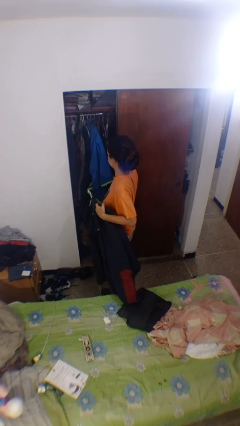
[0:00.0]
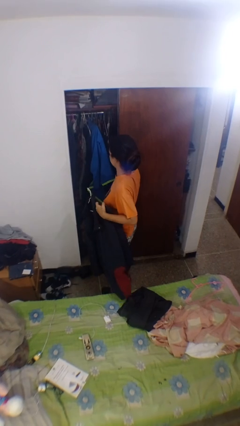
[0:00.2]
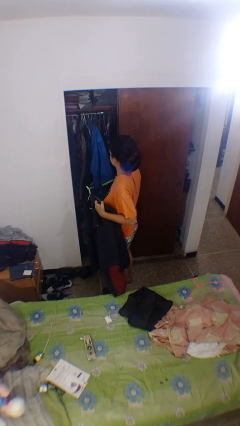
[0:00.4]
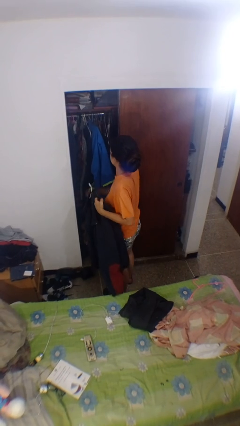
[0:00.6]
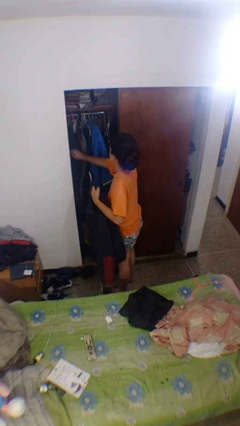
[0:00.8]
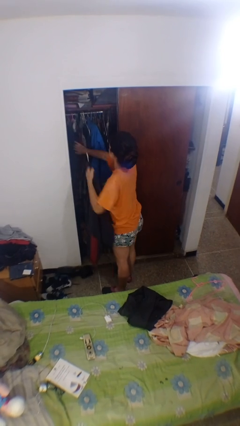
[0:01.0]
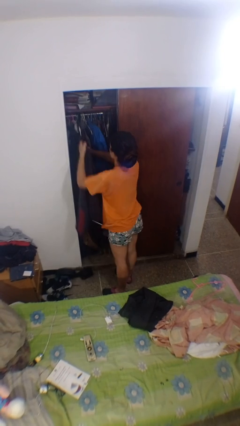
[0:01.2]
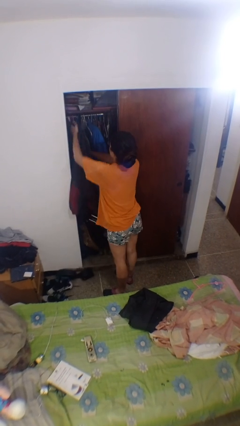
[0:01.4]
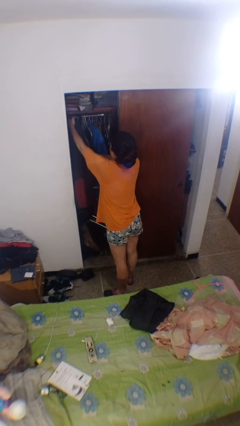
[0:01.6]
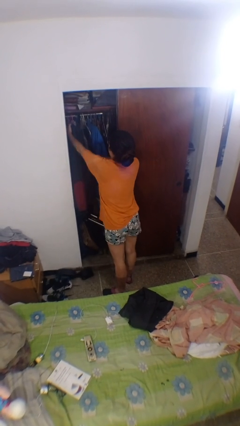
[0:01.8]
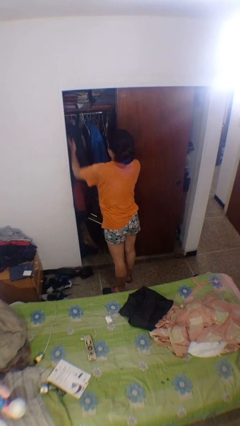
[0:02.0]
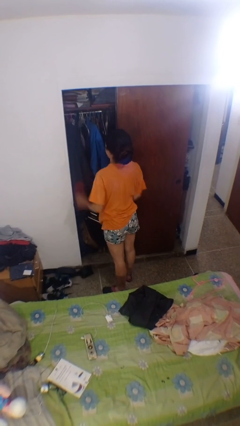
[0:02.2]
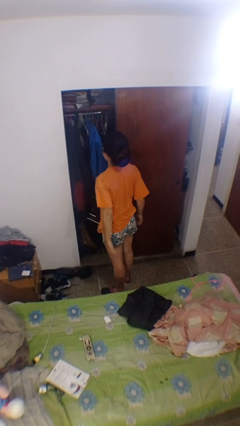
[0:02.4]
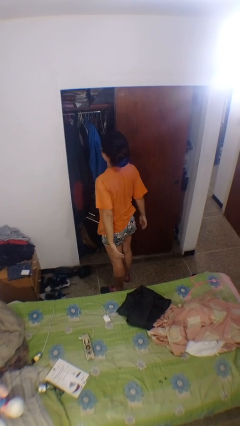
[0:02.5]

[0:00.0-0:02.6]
person puts clothes into closet

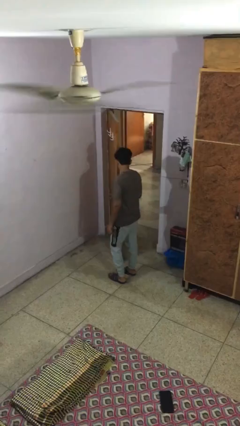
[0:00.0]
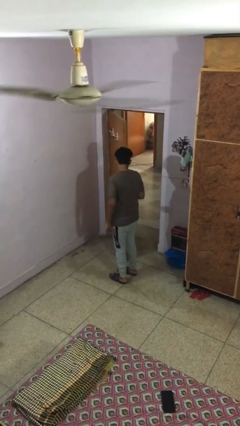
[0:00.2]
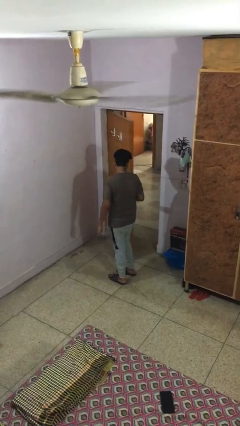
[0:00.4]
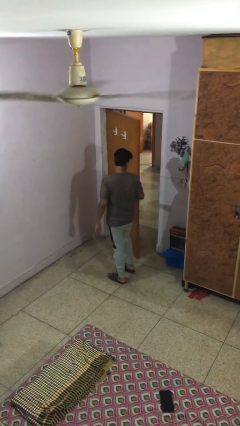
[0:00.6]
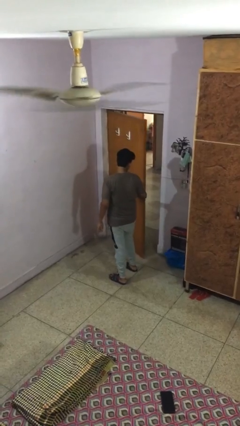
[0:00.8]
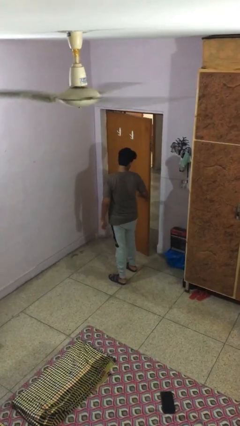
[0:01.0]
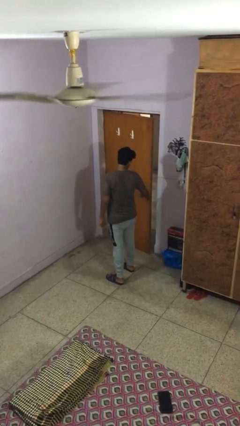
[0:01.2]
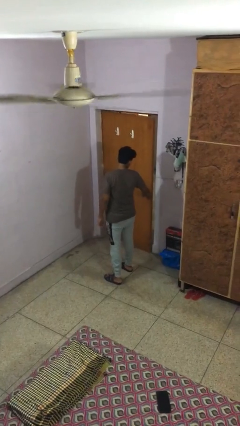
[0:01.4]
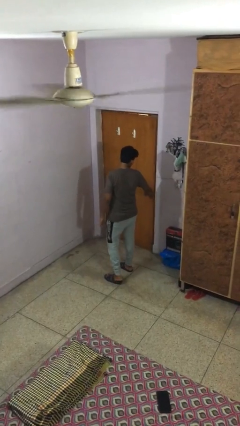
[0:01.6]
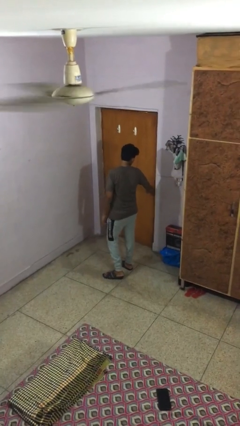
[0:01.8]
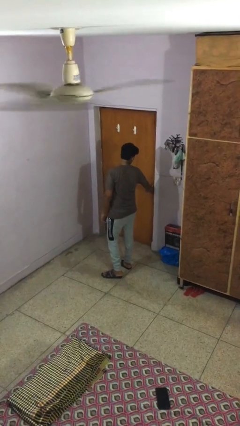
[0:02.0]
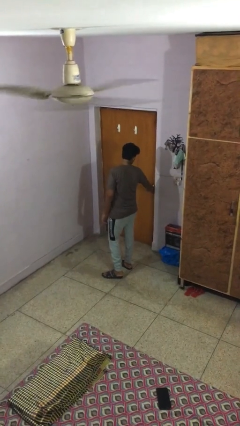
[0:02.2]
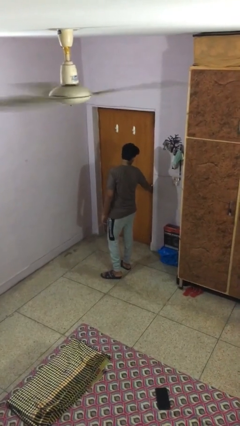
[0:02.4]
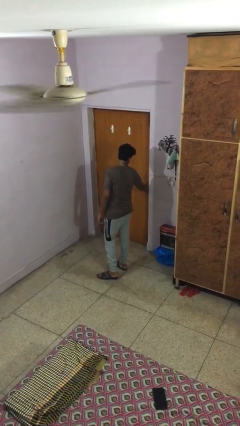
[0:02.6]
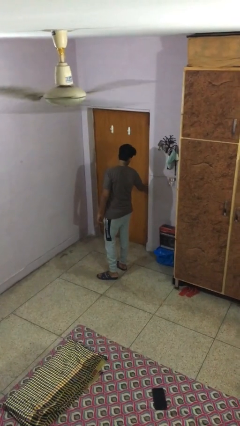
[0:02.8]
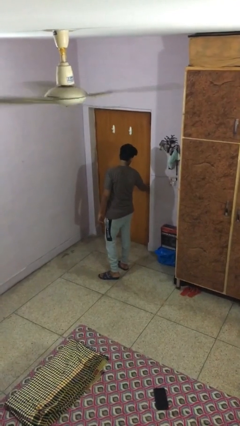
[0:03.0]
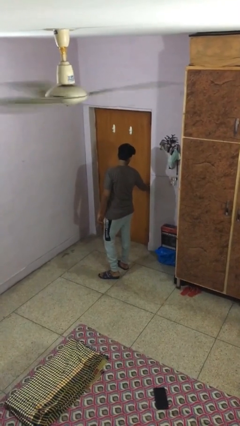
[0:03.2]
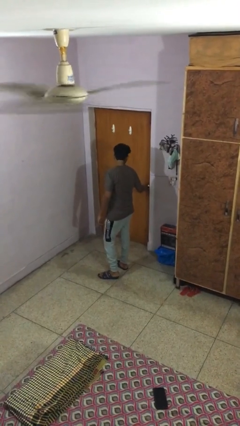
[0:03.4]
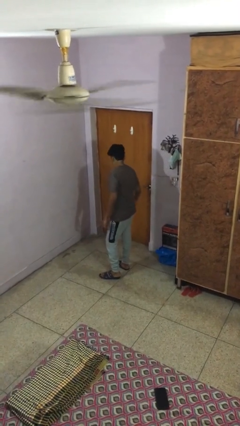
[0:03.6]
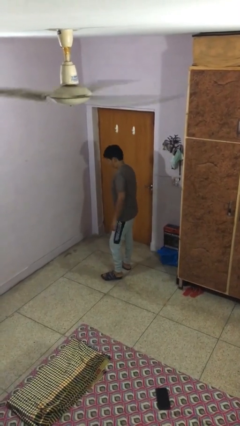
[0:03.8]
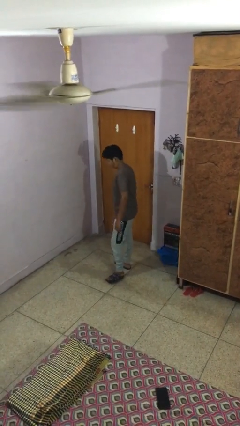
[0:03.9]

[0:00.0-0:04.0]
person closes facility door

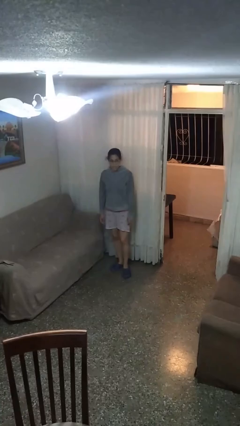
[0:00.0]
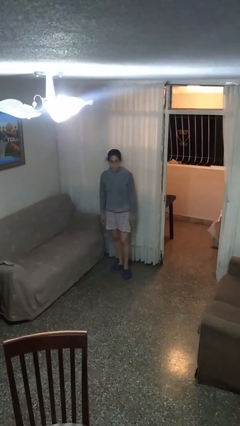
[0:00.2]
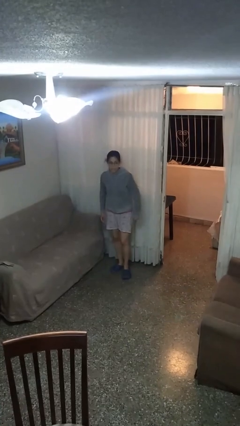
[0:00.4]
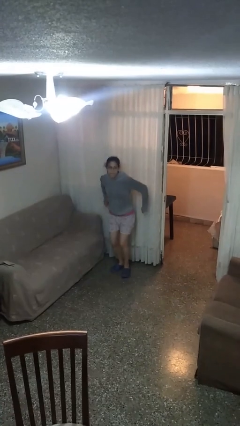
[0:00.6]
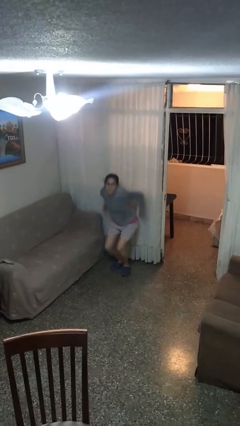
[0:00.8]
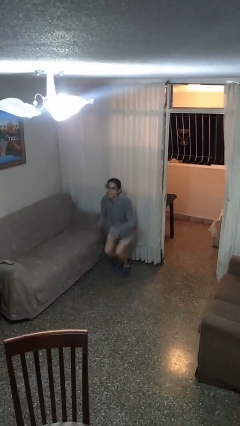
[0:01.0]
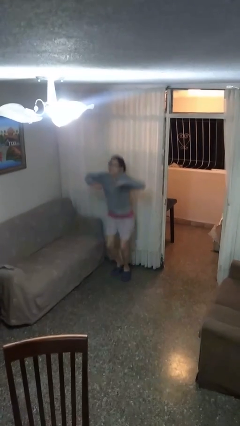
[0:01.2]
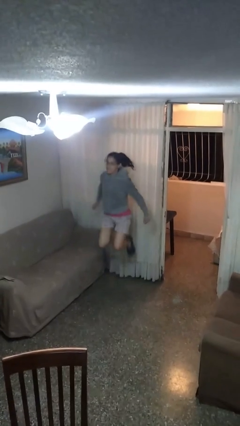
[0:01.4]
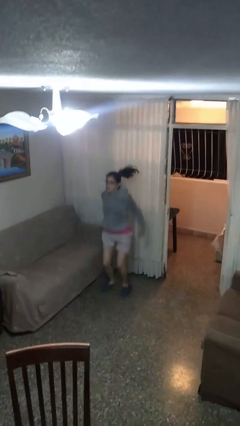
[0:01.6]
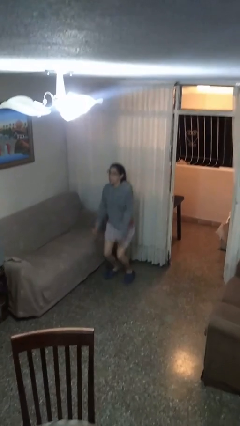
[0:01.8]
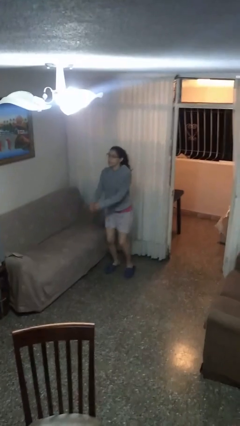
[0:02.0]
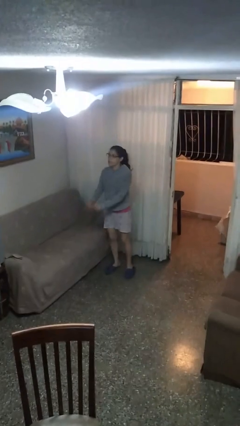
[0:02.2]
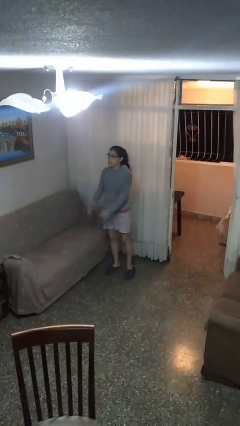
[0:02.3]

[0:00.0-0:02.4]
person jumps

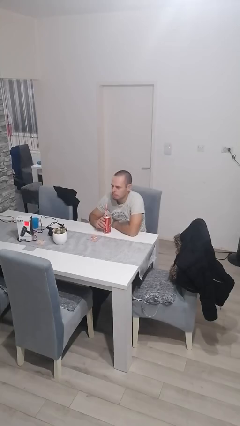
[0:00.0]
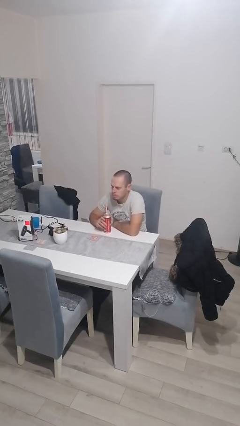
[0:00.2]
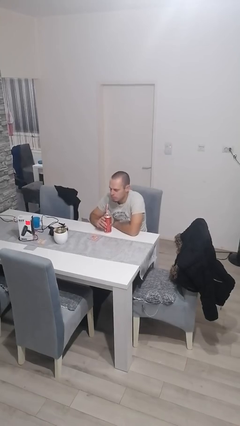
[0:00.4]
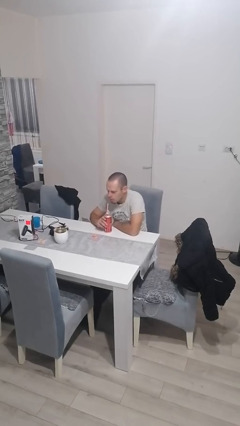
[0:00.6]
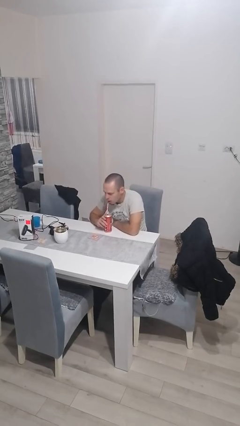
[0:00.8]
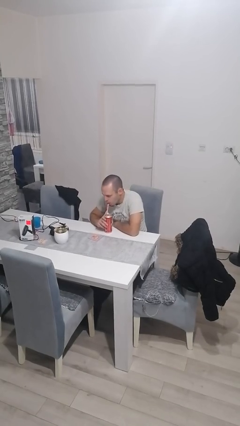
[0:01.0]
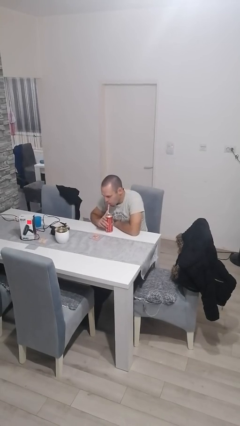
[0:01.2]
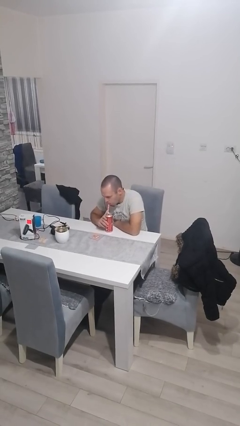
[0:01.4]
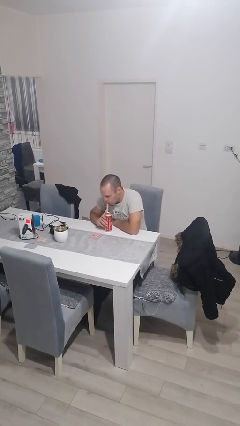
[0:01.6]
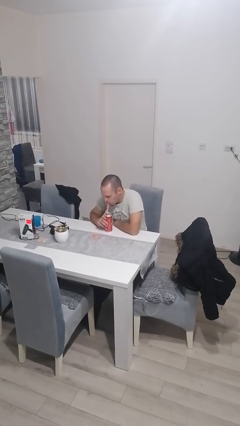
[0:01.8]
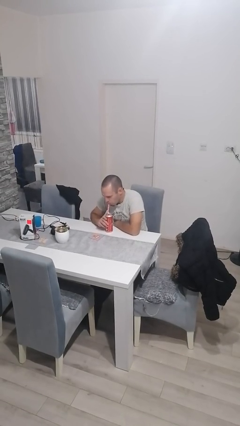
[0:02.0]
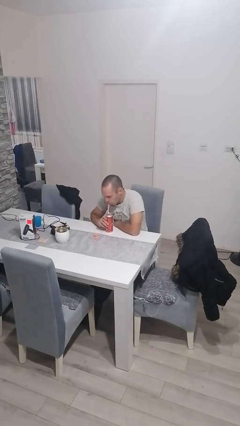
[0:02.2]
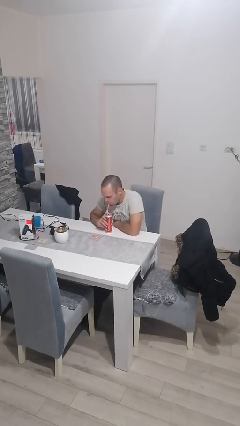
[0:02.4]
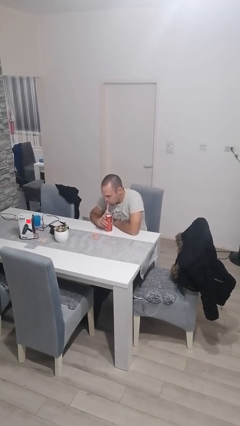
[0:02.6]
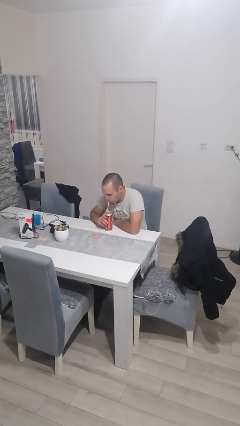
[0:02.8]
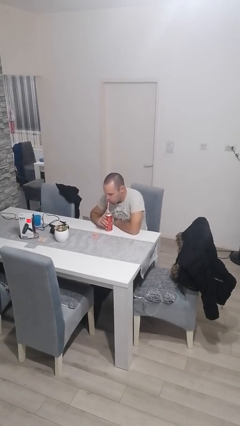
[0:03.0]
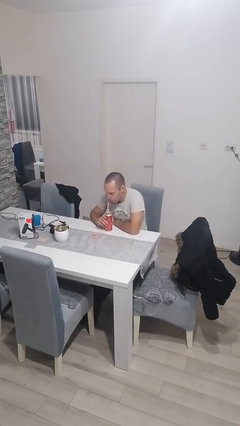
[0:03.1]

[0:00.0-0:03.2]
person drinks from straw

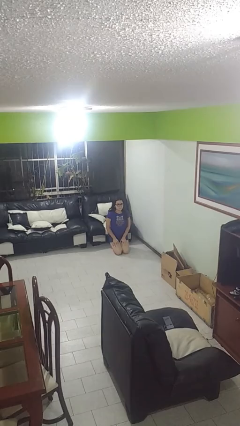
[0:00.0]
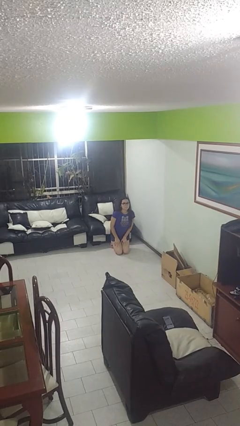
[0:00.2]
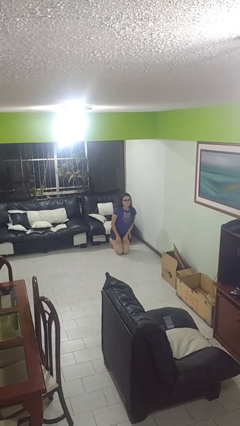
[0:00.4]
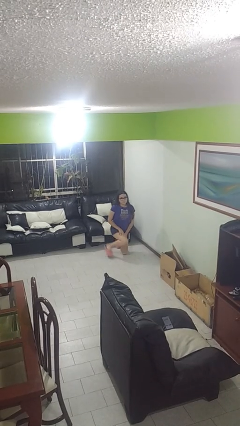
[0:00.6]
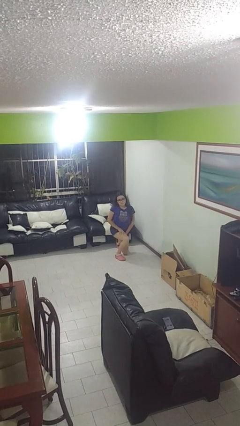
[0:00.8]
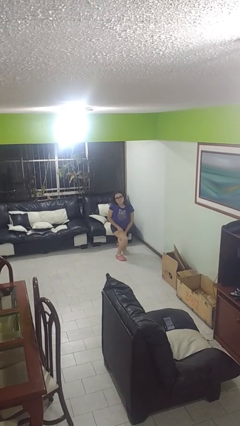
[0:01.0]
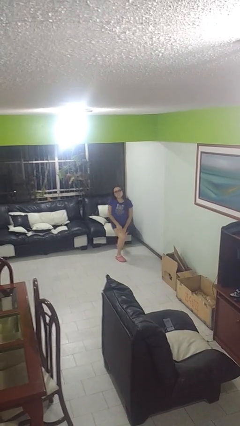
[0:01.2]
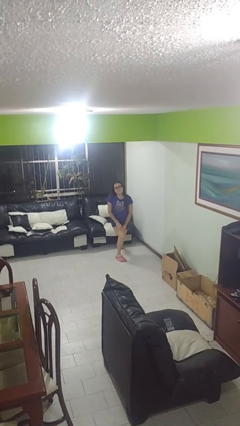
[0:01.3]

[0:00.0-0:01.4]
person stands up from floor

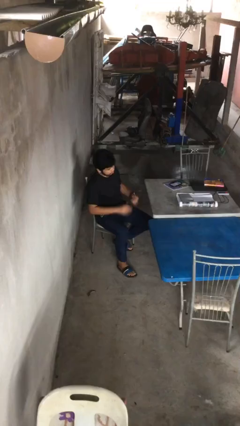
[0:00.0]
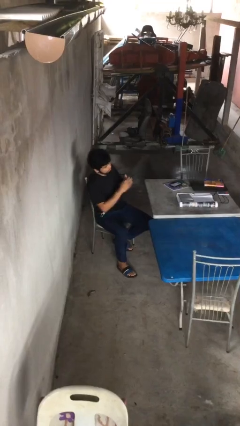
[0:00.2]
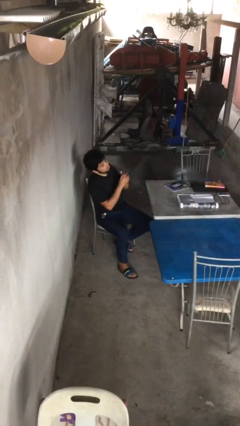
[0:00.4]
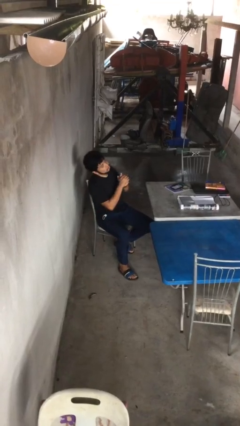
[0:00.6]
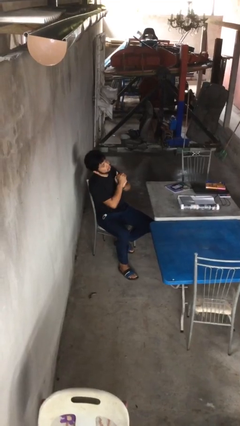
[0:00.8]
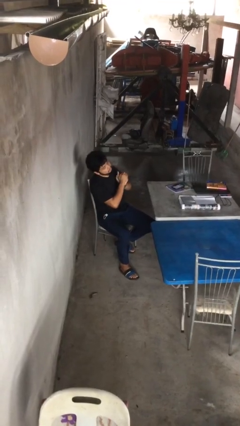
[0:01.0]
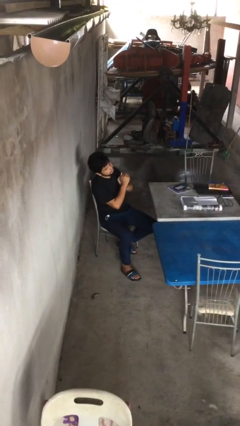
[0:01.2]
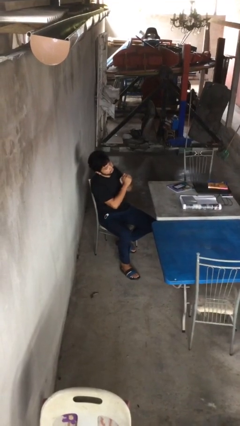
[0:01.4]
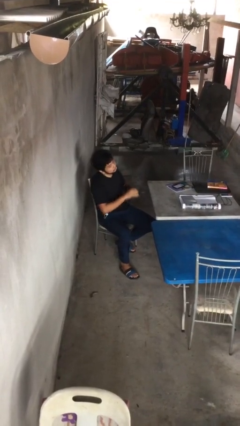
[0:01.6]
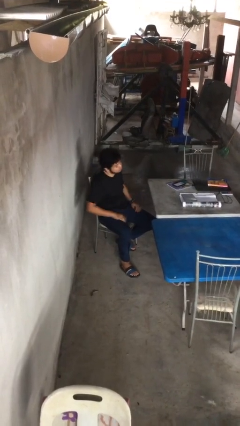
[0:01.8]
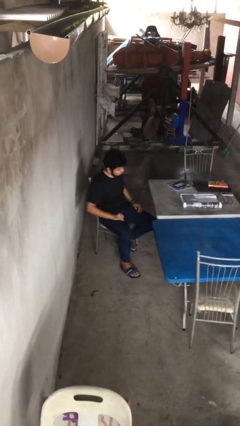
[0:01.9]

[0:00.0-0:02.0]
person cracks knuckles

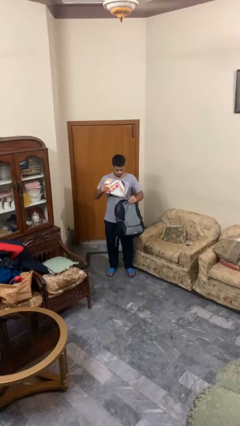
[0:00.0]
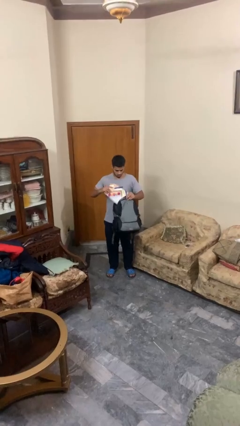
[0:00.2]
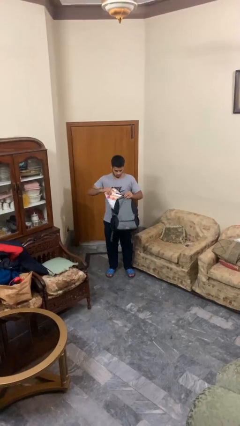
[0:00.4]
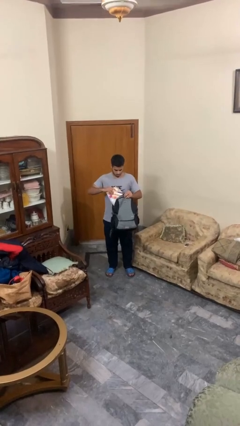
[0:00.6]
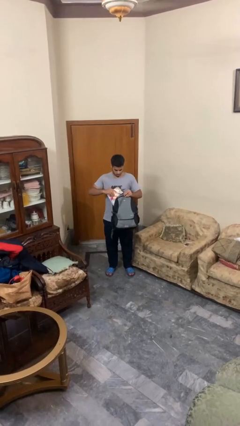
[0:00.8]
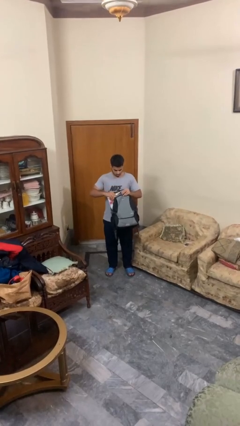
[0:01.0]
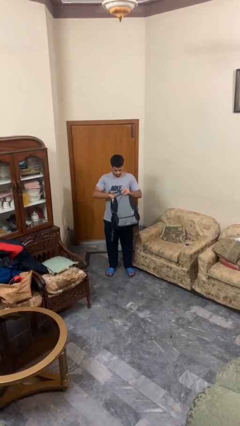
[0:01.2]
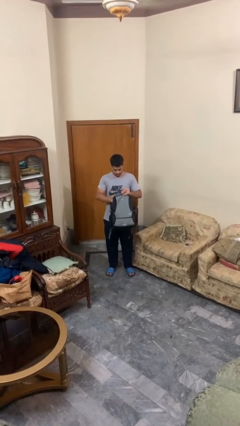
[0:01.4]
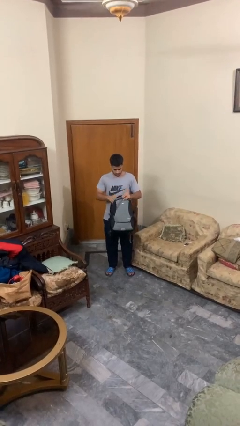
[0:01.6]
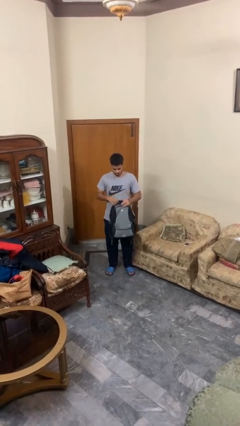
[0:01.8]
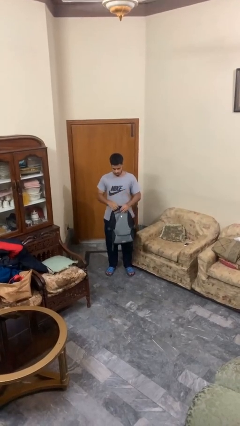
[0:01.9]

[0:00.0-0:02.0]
person puts object into backpack
